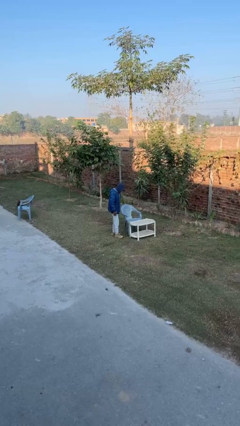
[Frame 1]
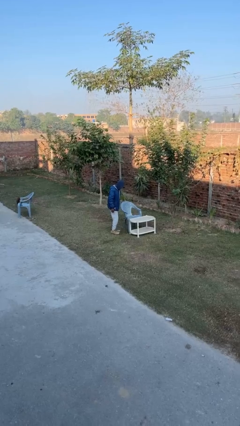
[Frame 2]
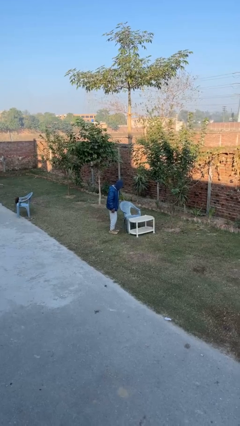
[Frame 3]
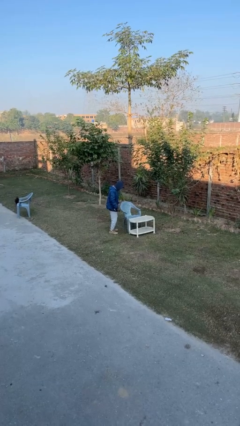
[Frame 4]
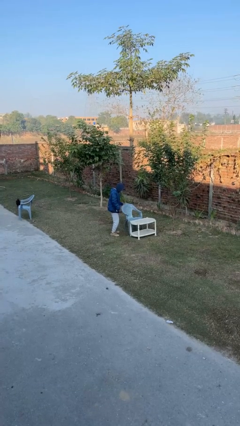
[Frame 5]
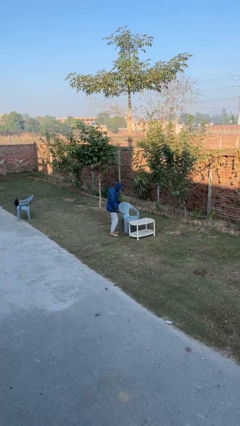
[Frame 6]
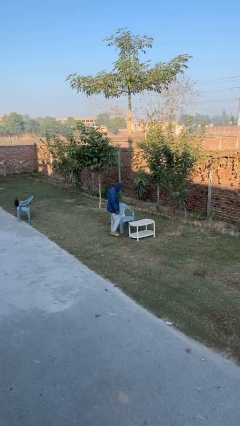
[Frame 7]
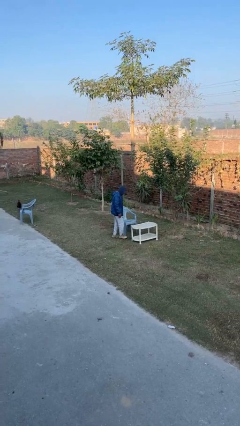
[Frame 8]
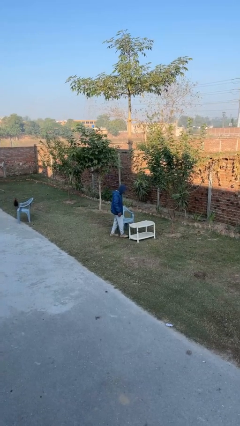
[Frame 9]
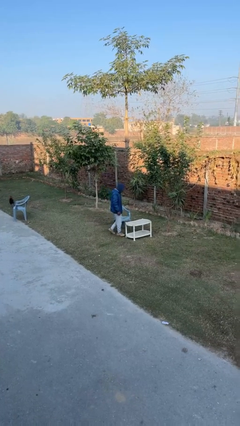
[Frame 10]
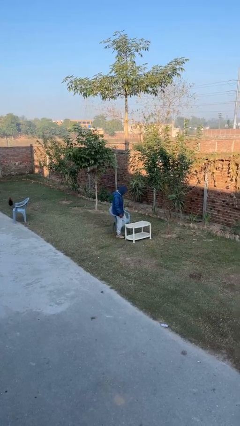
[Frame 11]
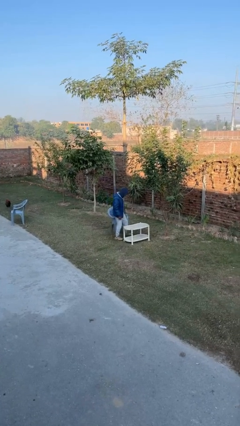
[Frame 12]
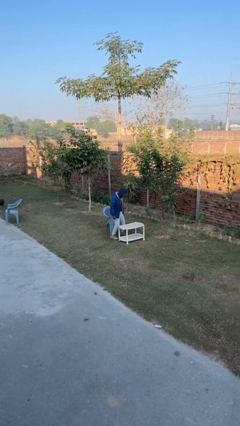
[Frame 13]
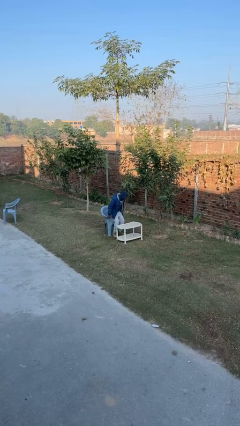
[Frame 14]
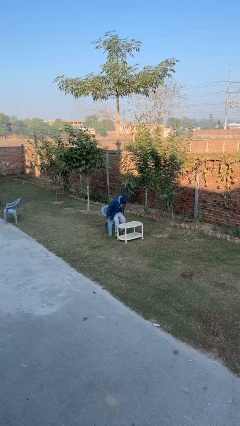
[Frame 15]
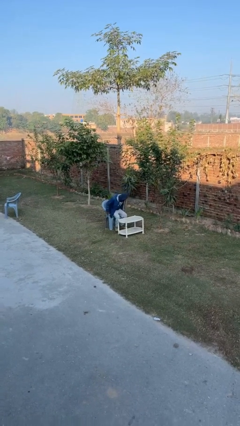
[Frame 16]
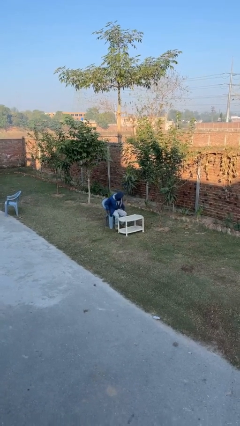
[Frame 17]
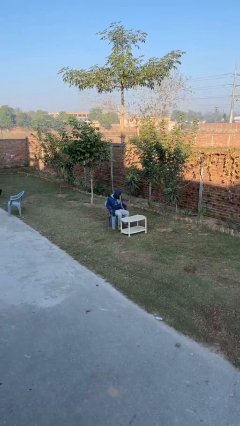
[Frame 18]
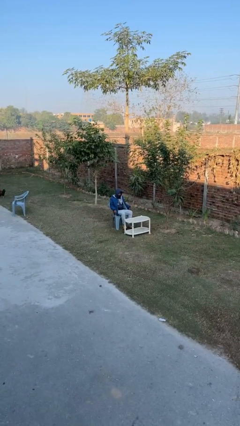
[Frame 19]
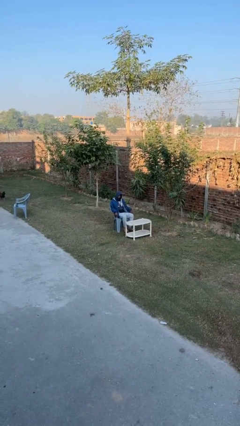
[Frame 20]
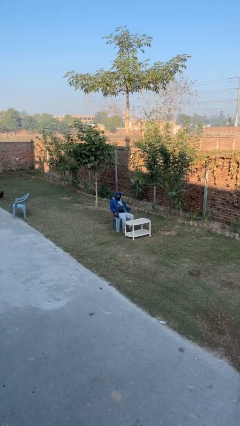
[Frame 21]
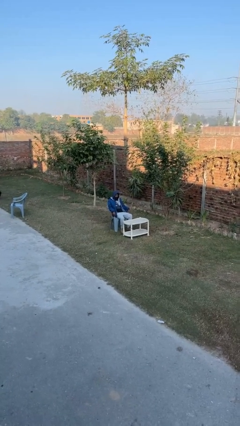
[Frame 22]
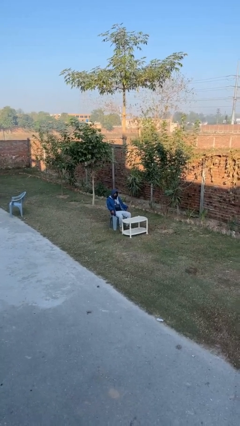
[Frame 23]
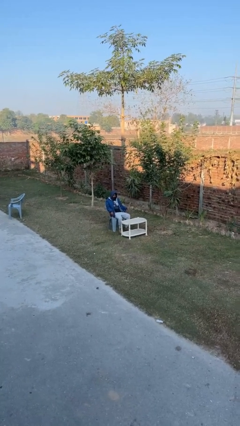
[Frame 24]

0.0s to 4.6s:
person sits down

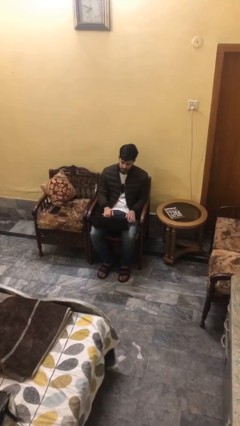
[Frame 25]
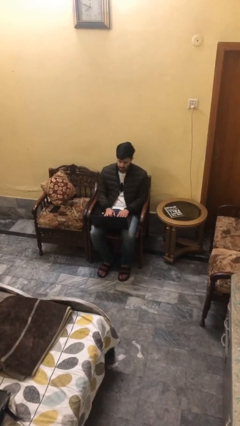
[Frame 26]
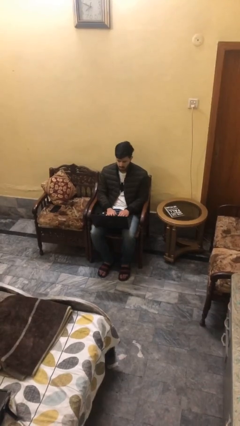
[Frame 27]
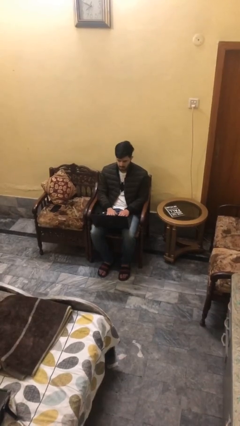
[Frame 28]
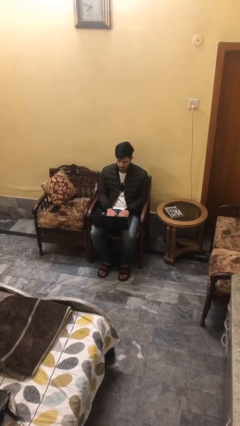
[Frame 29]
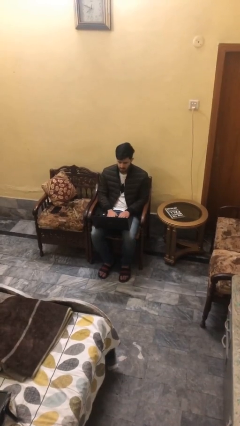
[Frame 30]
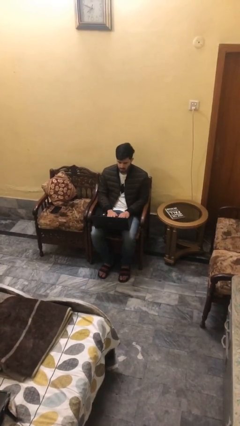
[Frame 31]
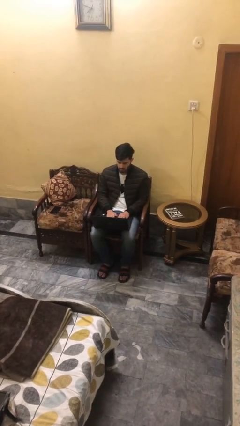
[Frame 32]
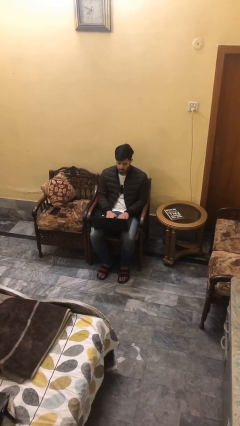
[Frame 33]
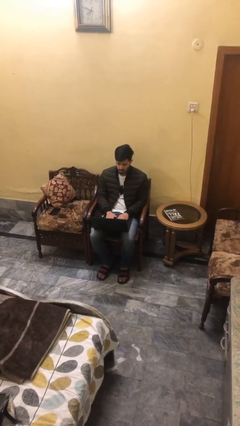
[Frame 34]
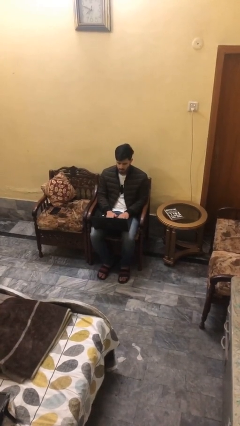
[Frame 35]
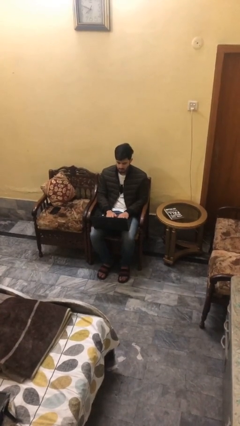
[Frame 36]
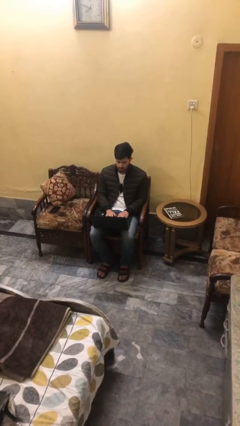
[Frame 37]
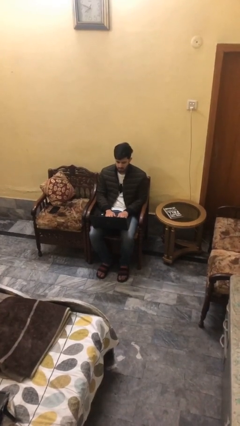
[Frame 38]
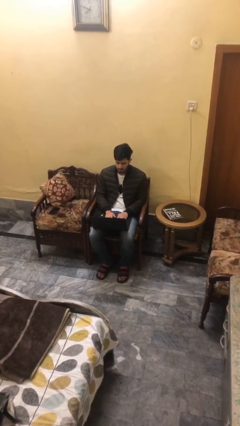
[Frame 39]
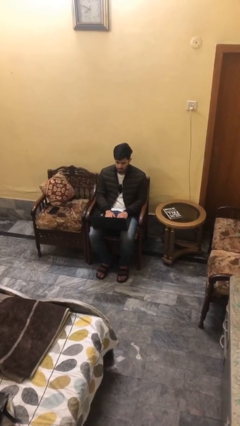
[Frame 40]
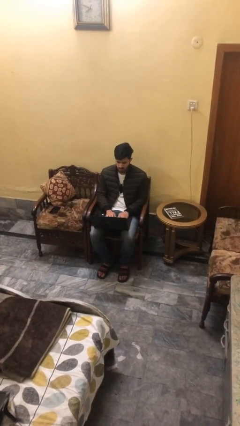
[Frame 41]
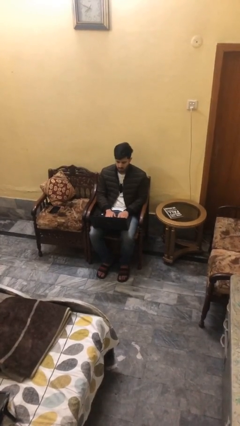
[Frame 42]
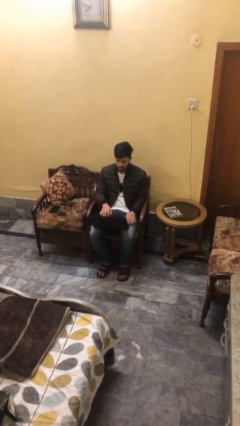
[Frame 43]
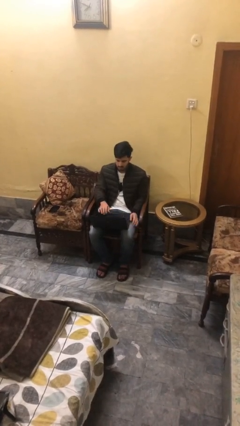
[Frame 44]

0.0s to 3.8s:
person interacts with laptop

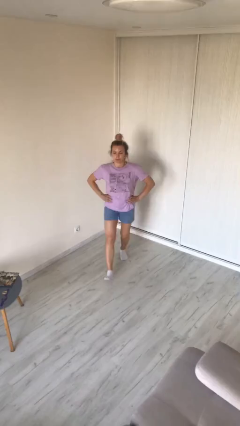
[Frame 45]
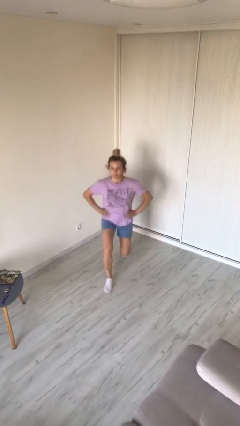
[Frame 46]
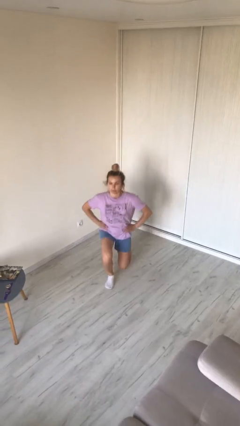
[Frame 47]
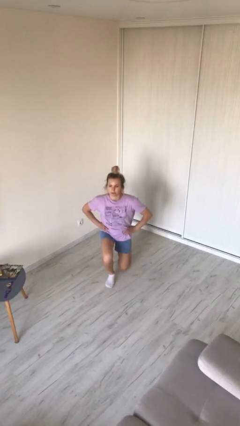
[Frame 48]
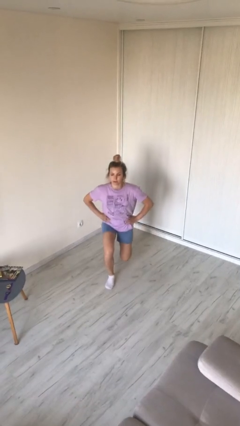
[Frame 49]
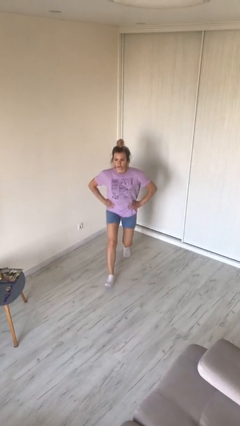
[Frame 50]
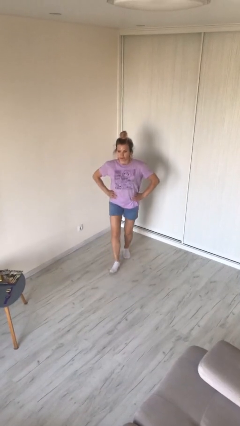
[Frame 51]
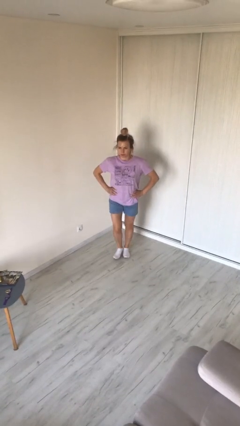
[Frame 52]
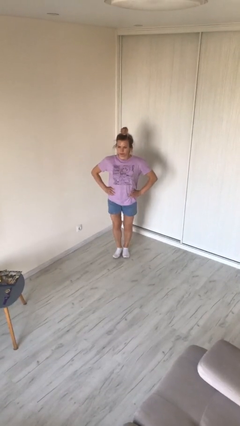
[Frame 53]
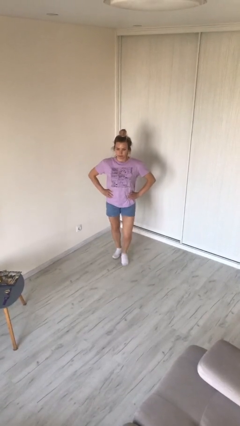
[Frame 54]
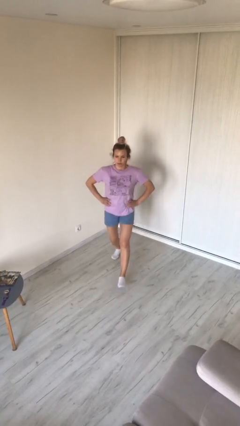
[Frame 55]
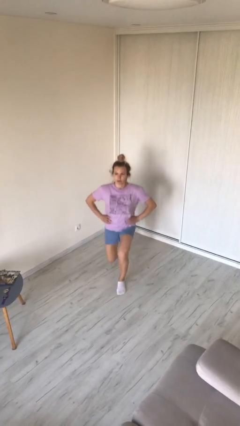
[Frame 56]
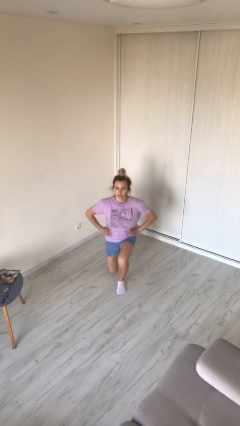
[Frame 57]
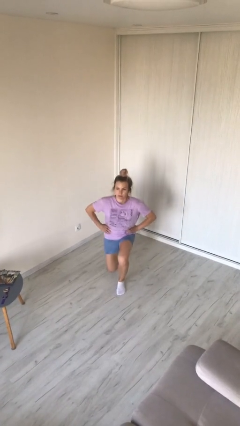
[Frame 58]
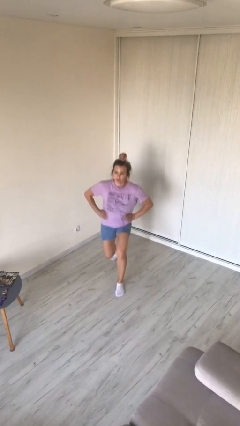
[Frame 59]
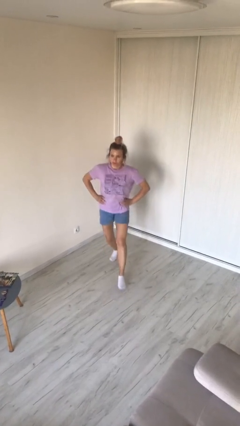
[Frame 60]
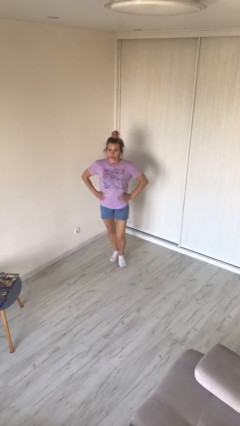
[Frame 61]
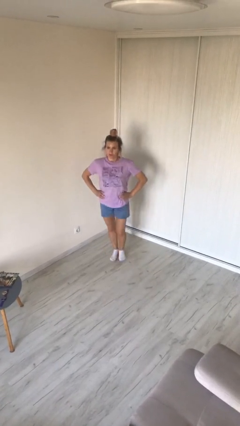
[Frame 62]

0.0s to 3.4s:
person exercises with lunges

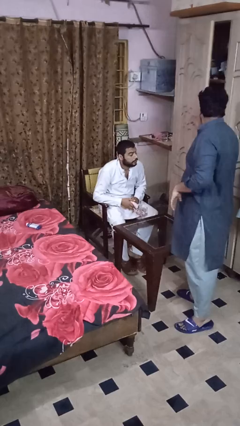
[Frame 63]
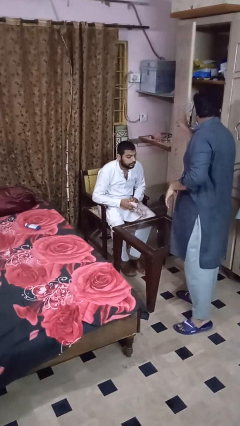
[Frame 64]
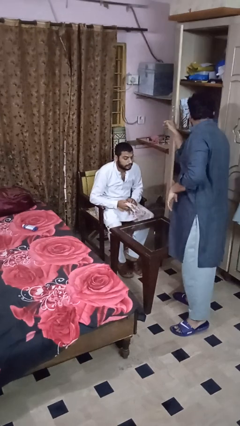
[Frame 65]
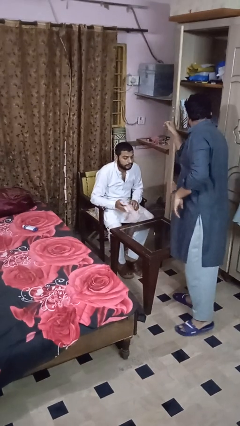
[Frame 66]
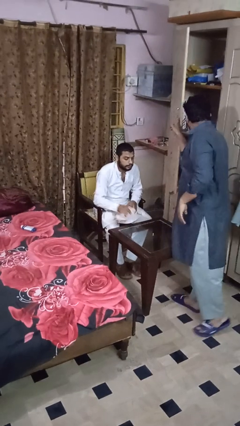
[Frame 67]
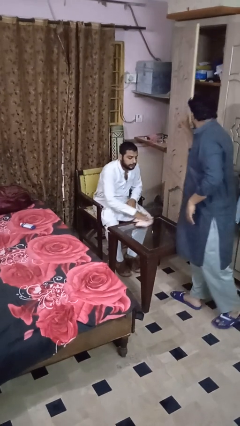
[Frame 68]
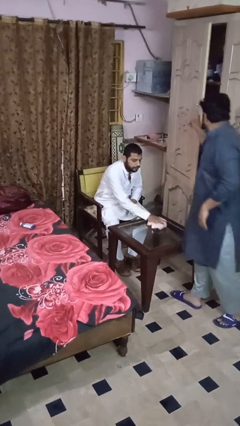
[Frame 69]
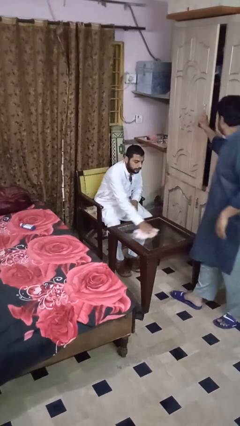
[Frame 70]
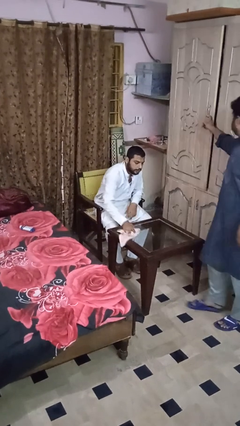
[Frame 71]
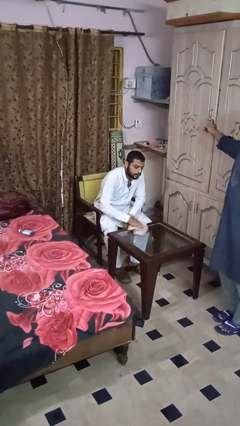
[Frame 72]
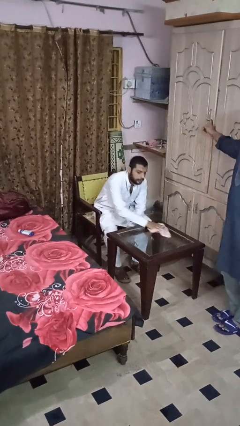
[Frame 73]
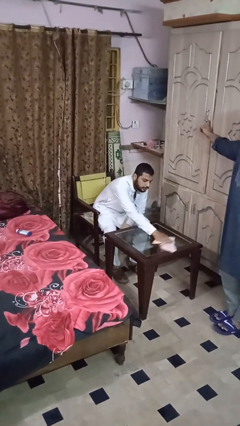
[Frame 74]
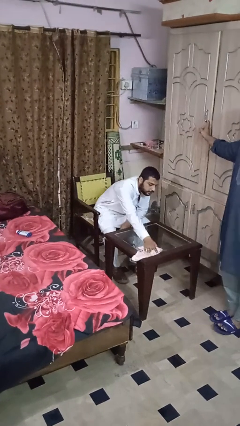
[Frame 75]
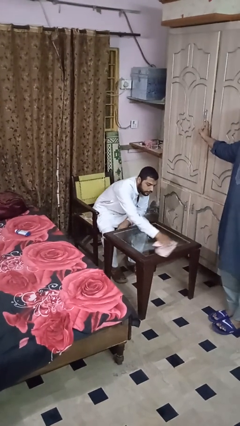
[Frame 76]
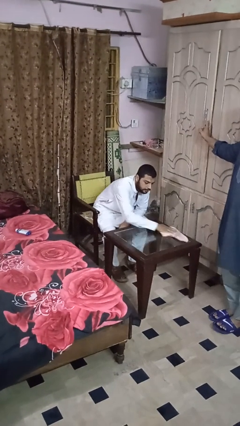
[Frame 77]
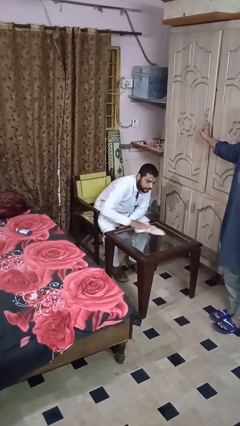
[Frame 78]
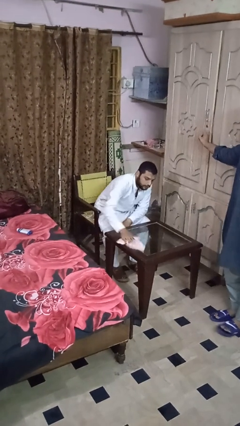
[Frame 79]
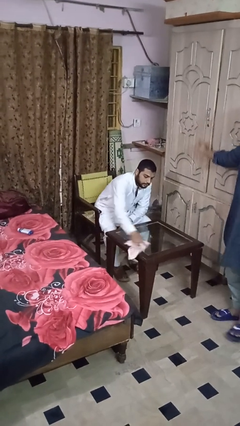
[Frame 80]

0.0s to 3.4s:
person cleans table with rag

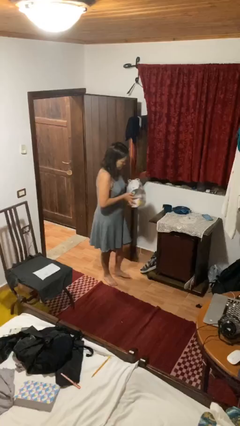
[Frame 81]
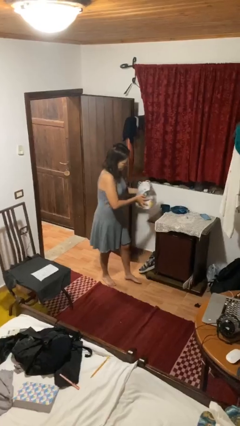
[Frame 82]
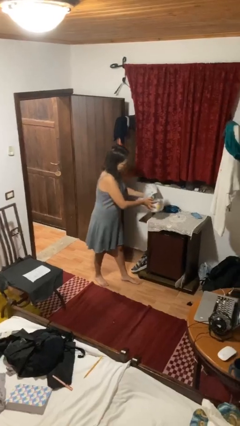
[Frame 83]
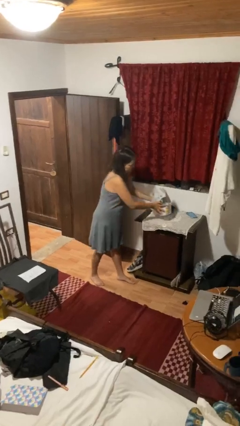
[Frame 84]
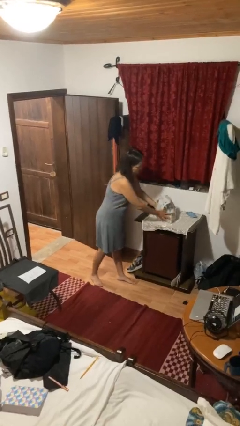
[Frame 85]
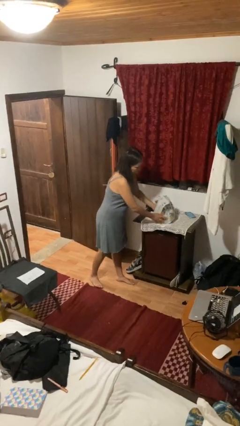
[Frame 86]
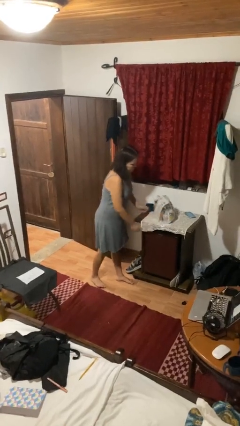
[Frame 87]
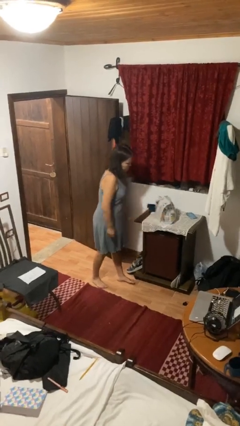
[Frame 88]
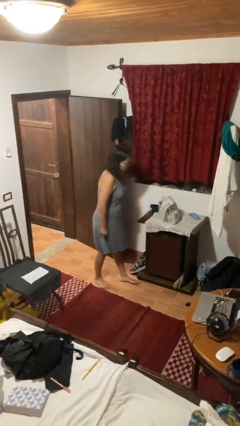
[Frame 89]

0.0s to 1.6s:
person puts down object on countertop

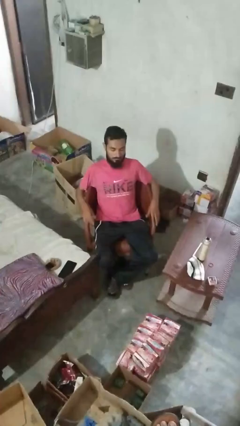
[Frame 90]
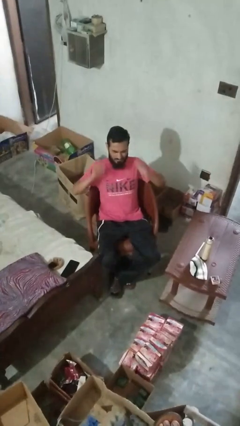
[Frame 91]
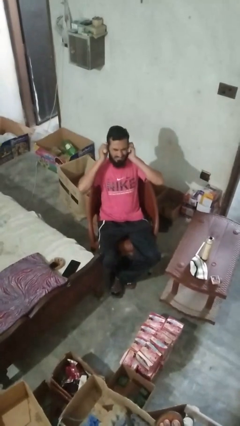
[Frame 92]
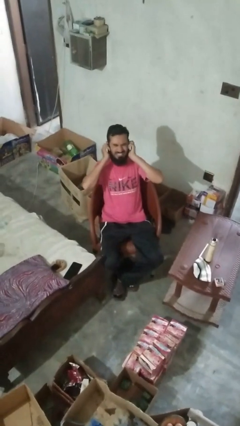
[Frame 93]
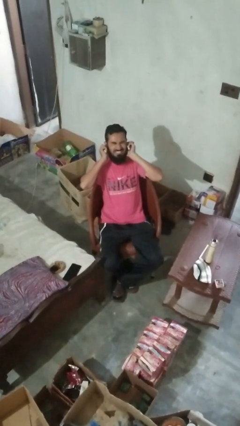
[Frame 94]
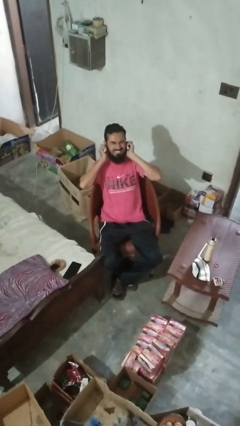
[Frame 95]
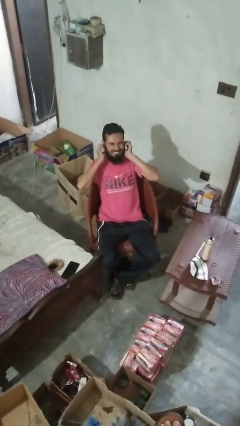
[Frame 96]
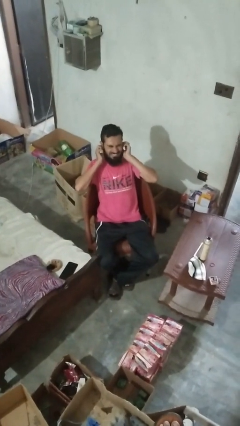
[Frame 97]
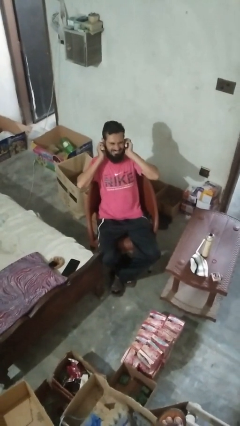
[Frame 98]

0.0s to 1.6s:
person puts fingers in ear
